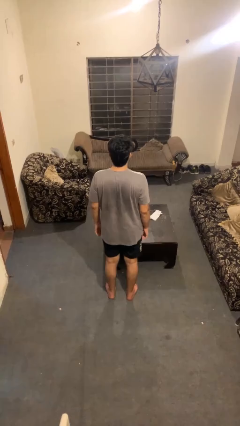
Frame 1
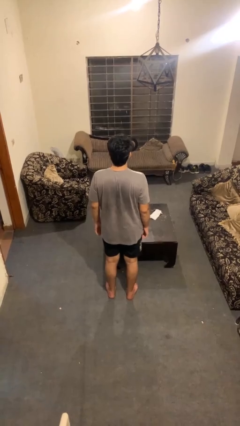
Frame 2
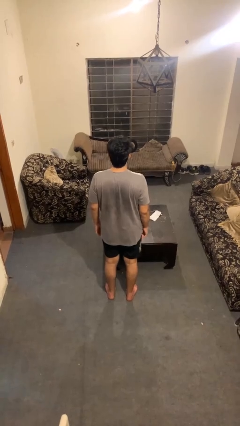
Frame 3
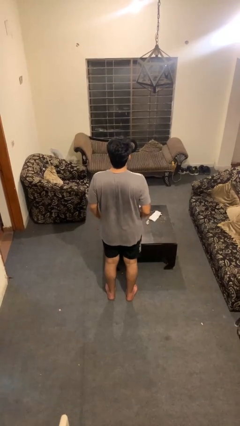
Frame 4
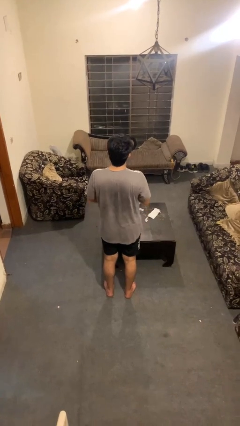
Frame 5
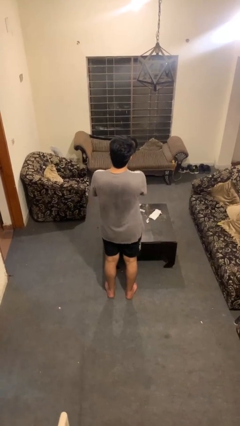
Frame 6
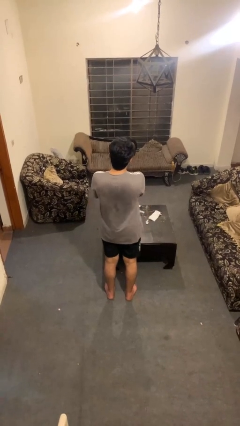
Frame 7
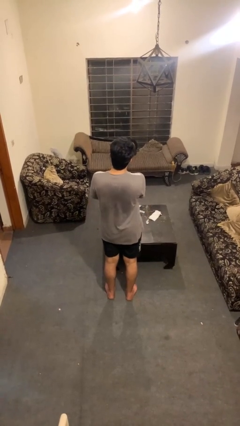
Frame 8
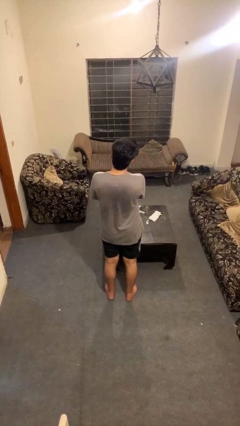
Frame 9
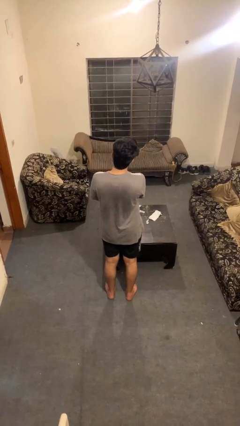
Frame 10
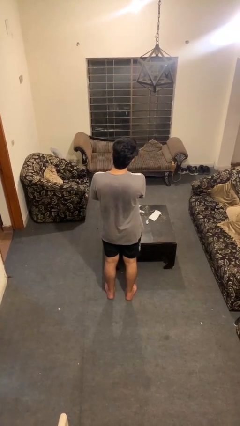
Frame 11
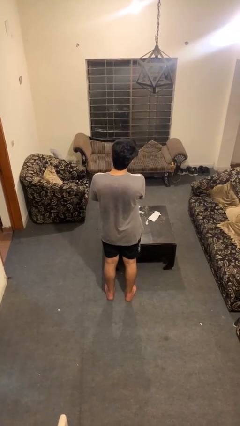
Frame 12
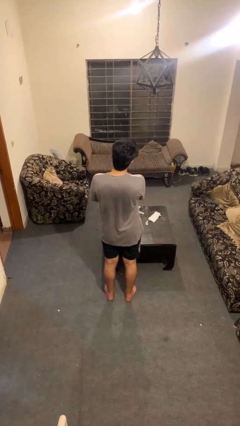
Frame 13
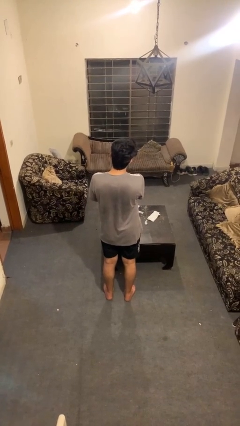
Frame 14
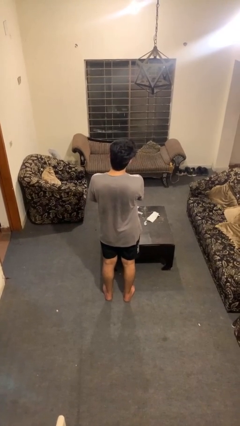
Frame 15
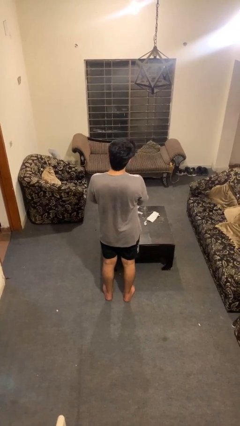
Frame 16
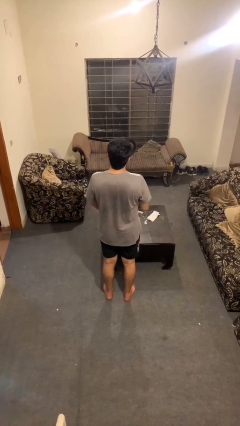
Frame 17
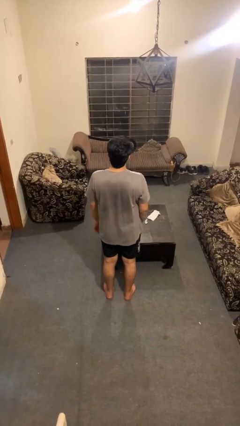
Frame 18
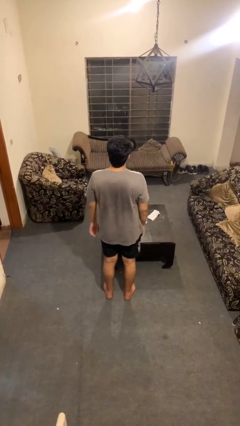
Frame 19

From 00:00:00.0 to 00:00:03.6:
person strokes chin

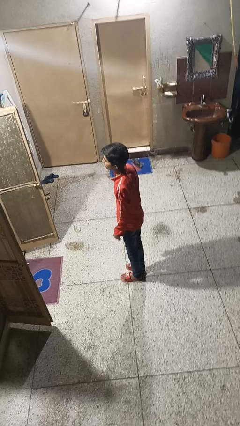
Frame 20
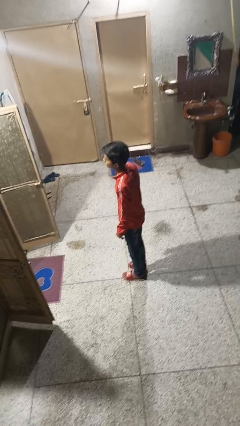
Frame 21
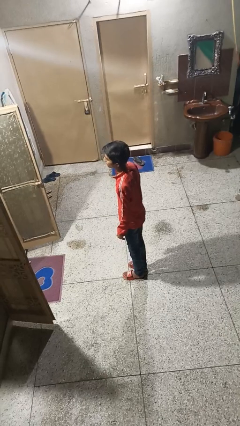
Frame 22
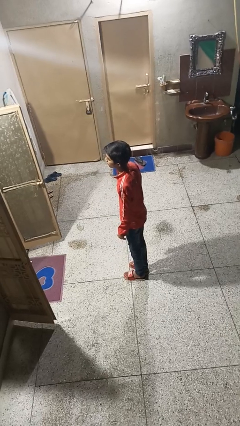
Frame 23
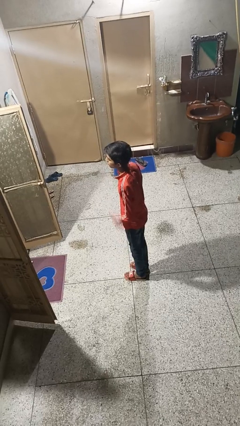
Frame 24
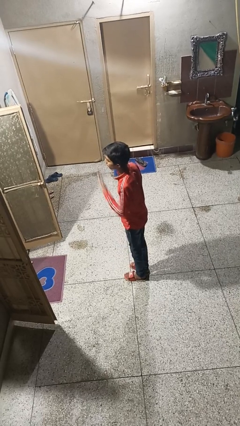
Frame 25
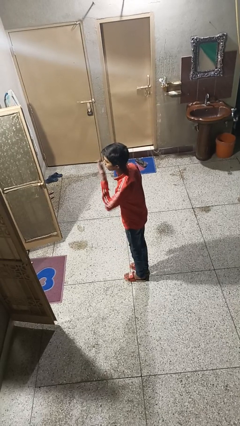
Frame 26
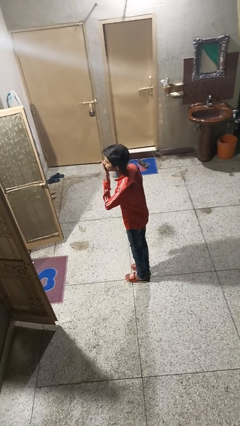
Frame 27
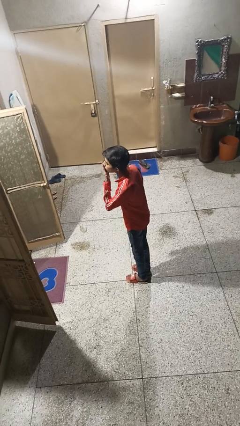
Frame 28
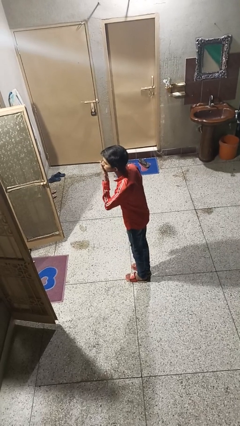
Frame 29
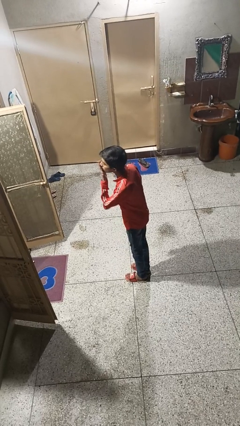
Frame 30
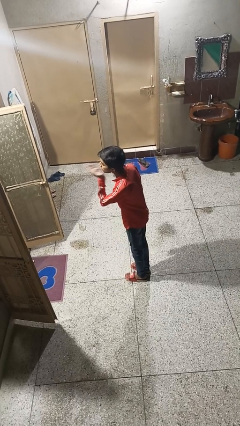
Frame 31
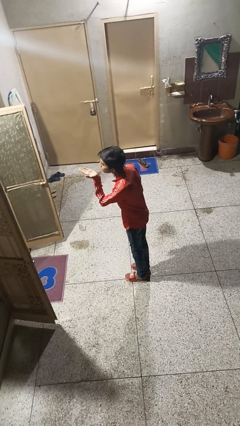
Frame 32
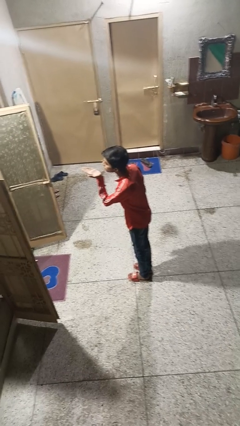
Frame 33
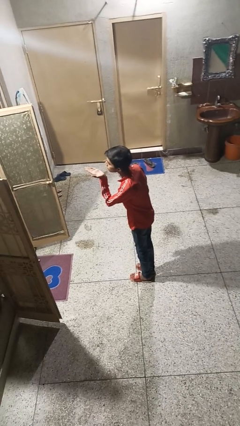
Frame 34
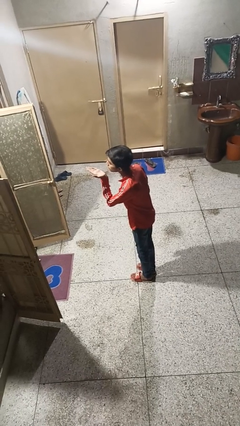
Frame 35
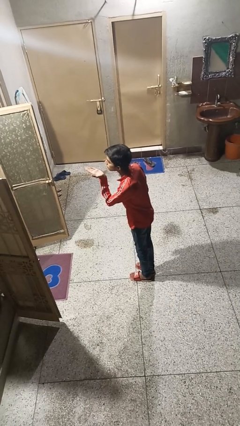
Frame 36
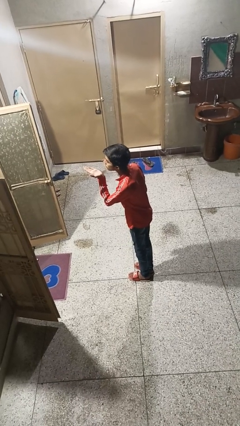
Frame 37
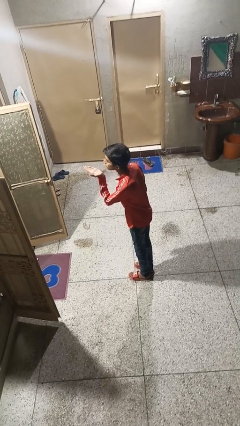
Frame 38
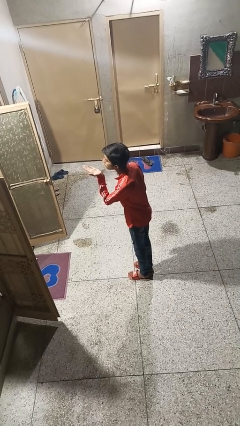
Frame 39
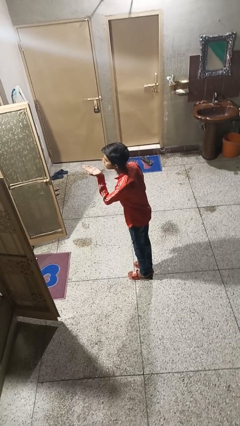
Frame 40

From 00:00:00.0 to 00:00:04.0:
person gestures blow kiss

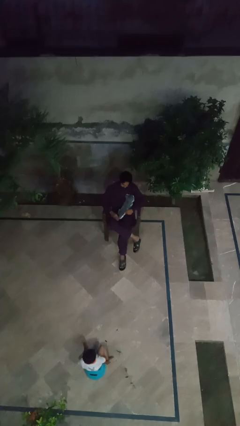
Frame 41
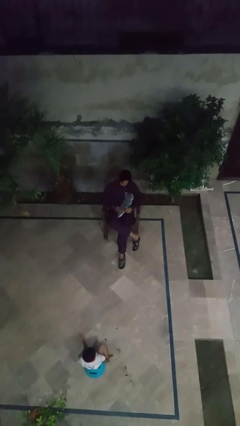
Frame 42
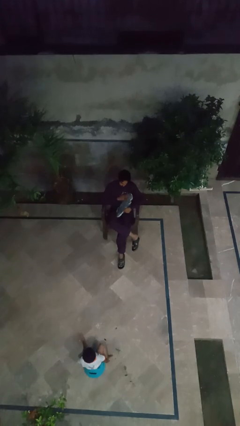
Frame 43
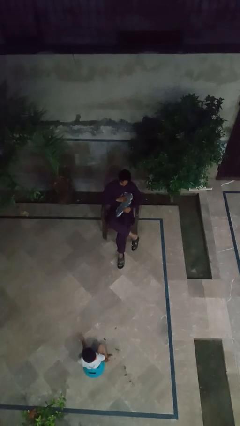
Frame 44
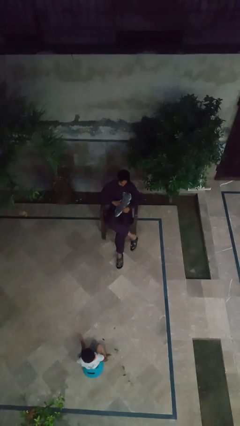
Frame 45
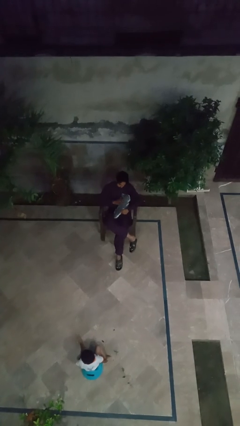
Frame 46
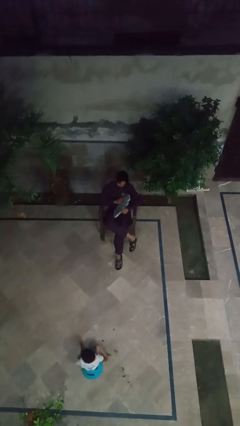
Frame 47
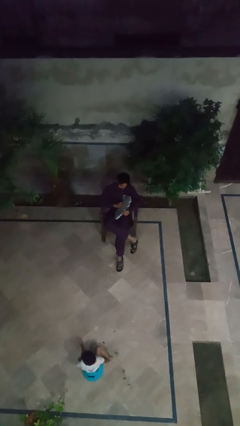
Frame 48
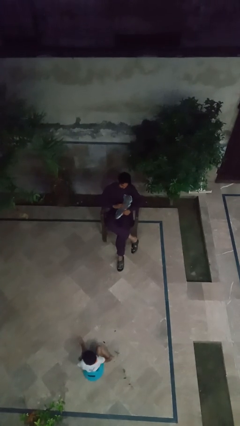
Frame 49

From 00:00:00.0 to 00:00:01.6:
person pets cat

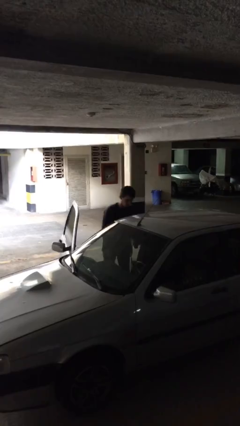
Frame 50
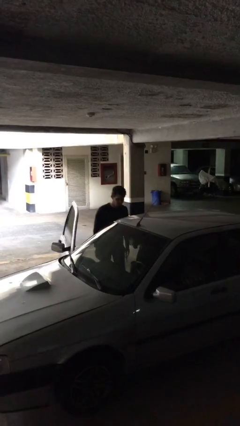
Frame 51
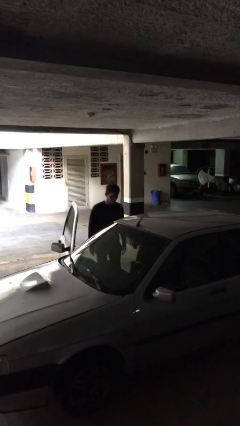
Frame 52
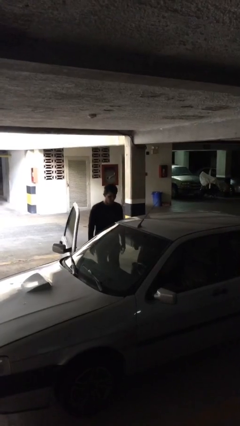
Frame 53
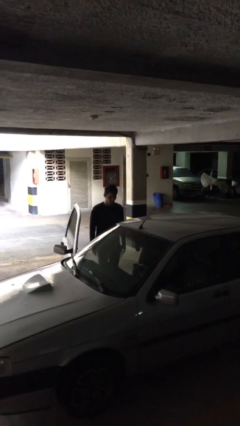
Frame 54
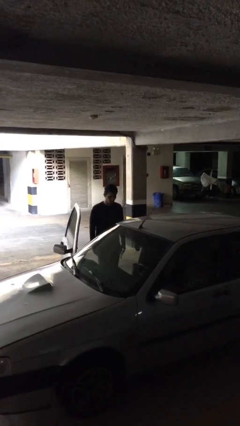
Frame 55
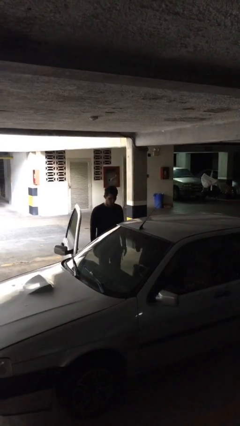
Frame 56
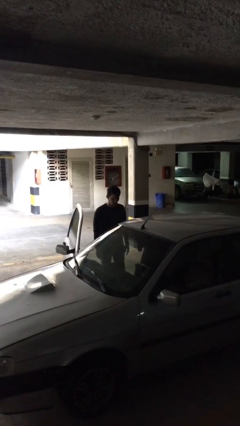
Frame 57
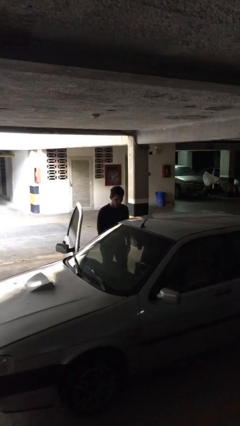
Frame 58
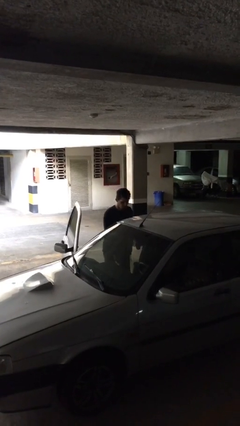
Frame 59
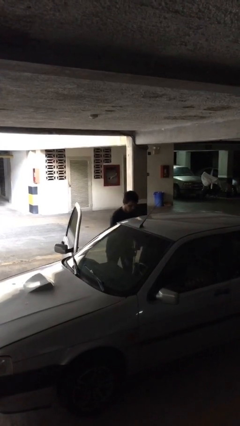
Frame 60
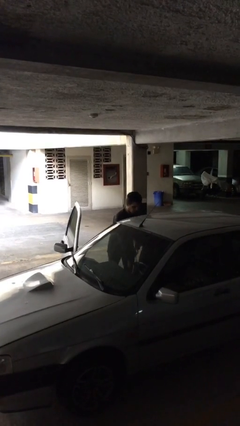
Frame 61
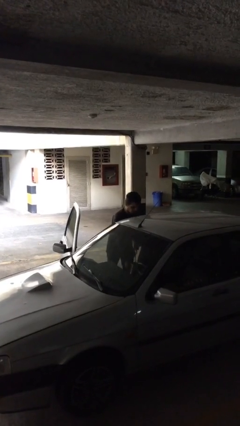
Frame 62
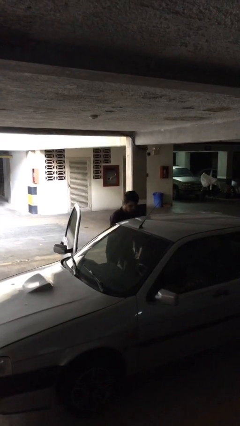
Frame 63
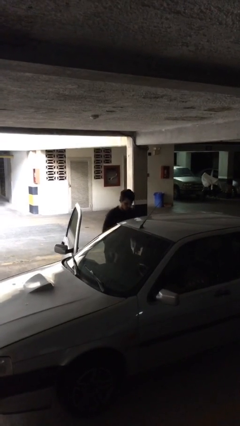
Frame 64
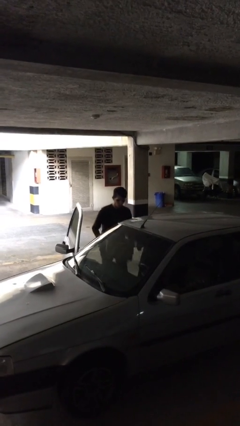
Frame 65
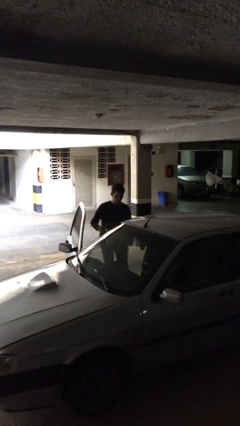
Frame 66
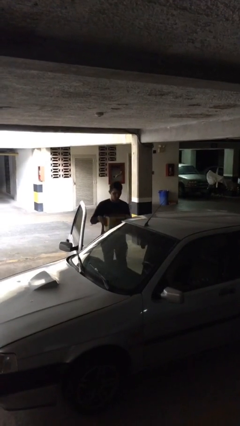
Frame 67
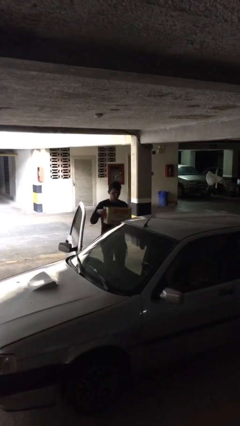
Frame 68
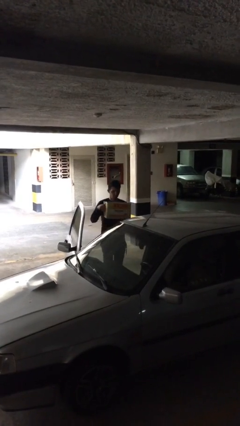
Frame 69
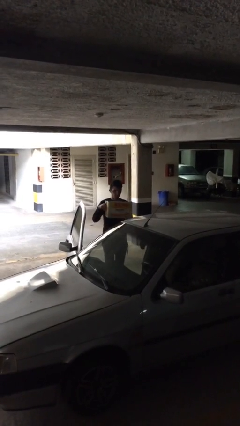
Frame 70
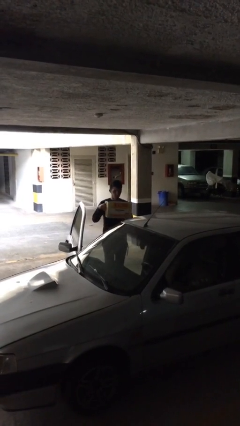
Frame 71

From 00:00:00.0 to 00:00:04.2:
person unloads car

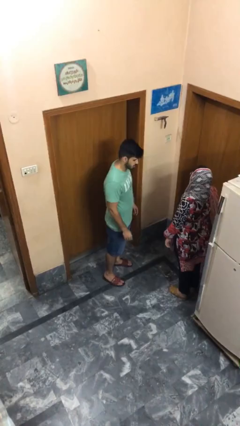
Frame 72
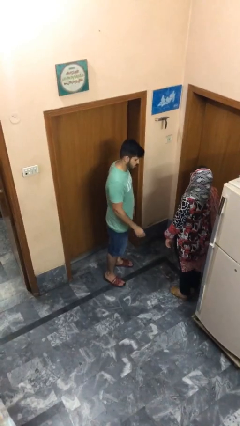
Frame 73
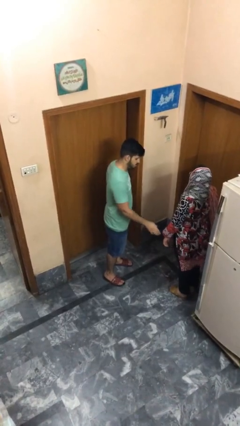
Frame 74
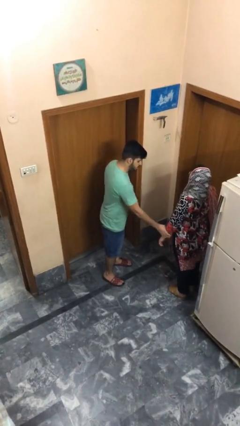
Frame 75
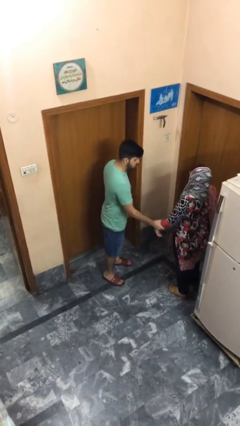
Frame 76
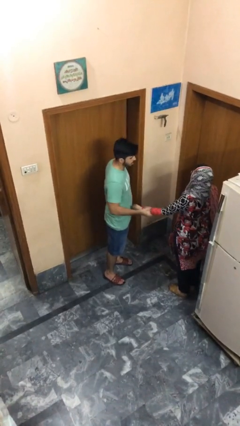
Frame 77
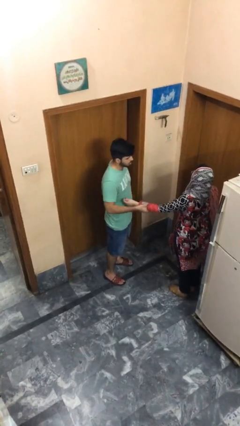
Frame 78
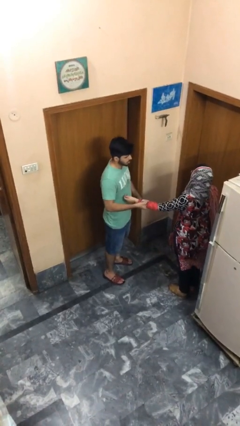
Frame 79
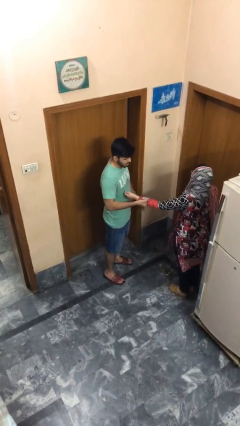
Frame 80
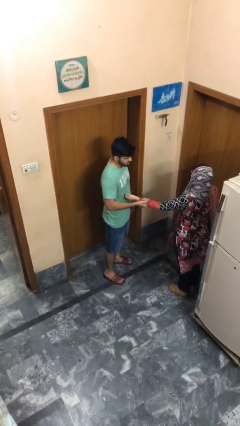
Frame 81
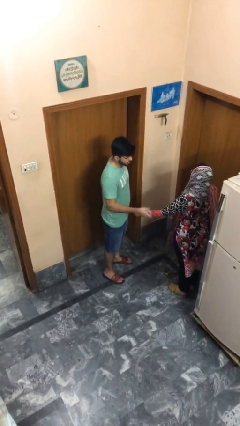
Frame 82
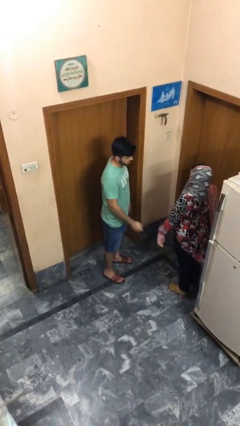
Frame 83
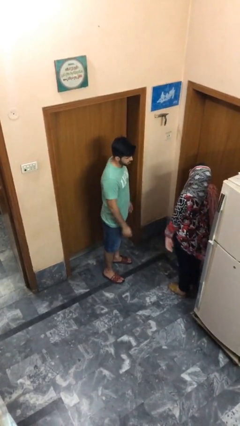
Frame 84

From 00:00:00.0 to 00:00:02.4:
person grabs person by forearm

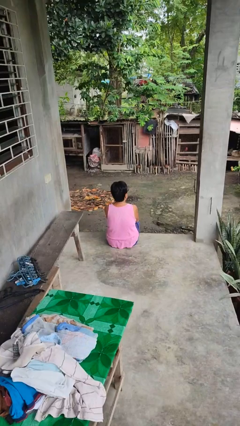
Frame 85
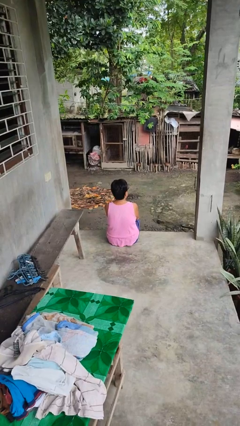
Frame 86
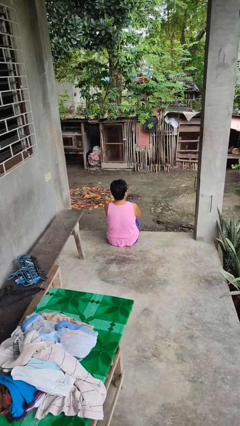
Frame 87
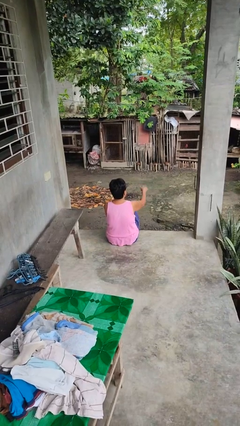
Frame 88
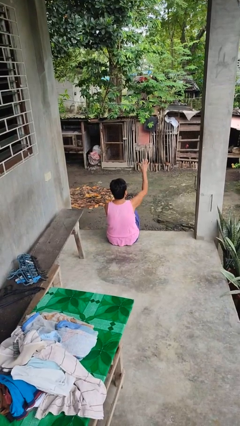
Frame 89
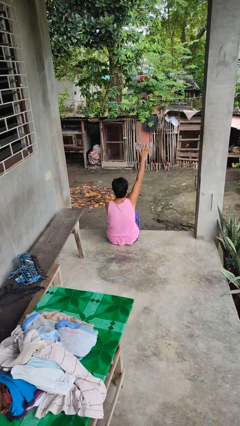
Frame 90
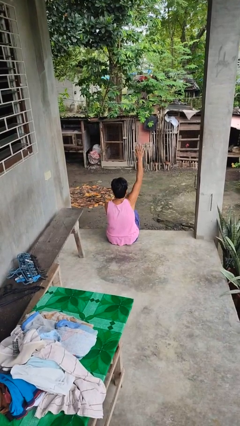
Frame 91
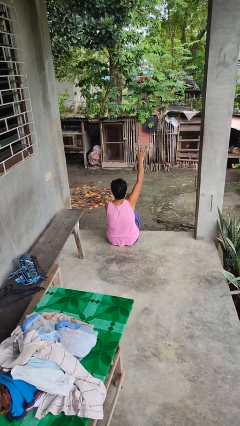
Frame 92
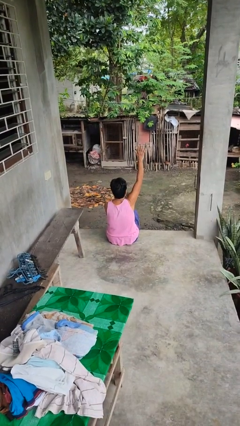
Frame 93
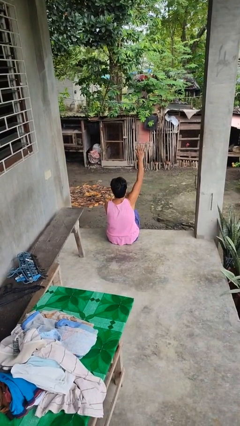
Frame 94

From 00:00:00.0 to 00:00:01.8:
person gestures raise hand
